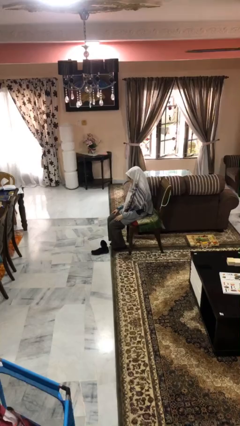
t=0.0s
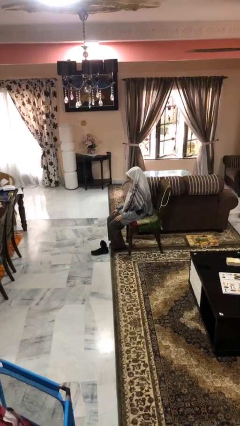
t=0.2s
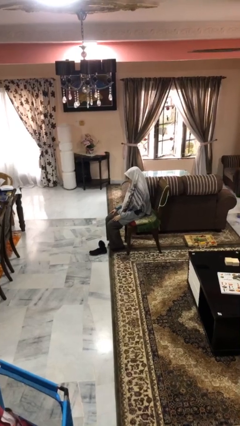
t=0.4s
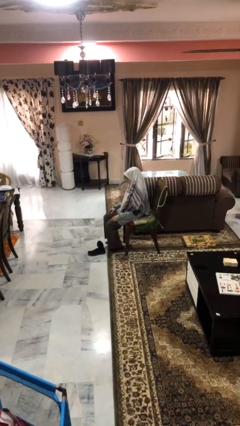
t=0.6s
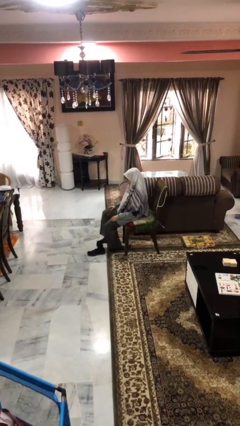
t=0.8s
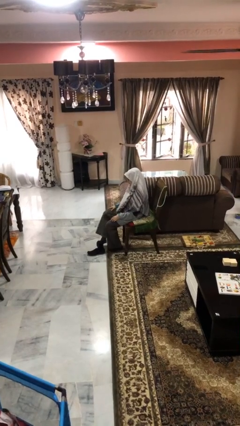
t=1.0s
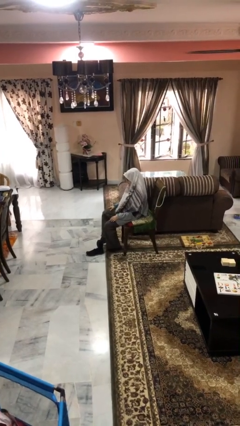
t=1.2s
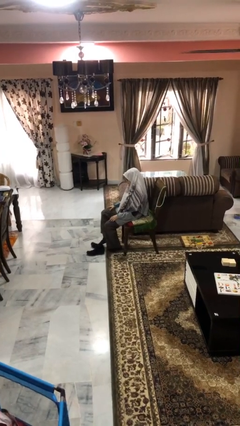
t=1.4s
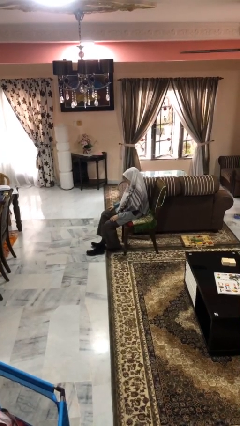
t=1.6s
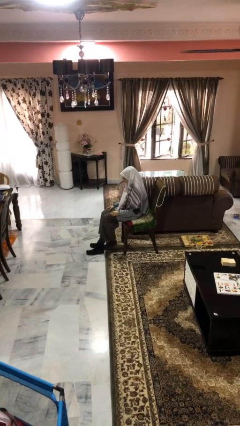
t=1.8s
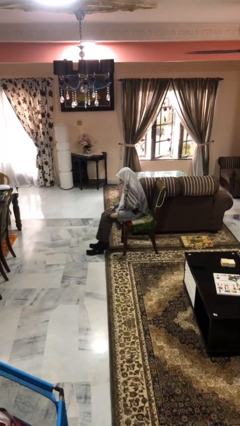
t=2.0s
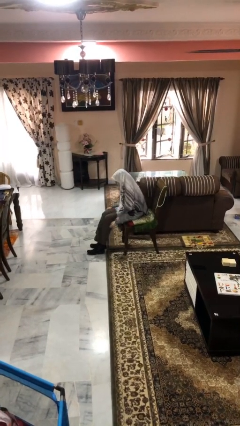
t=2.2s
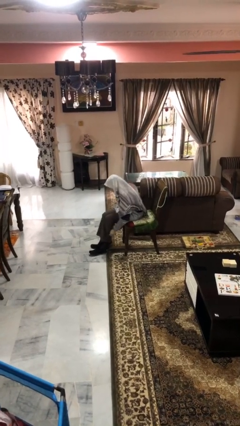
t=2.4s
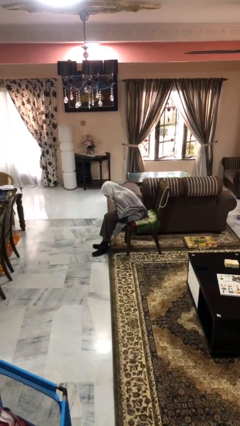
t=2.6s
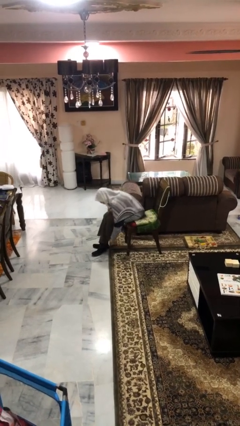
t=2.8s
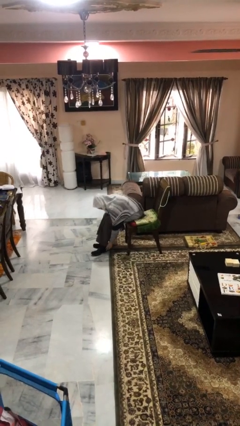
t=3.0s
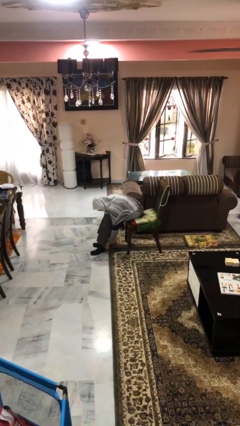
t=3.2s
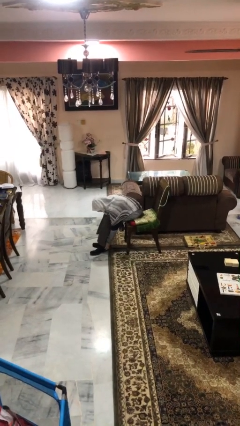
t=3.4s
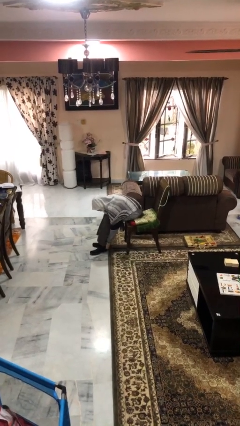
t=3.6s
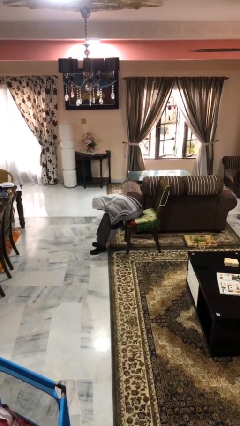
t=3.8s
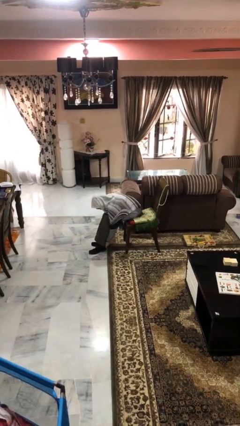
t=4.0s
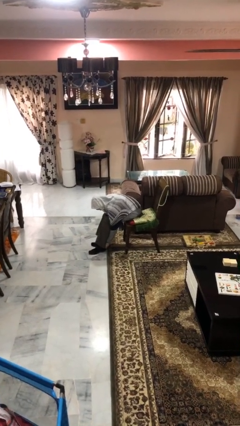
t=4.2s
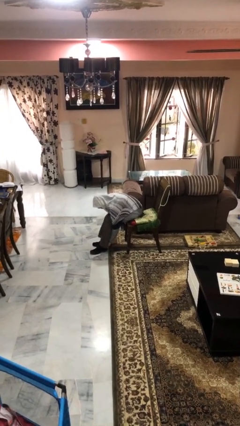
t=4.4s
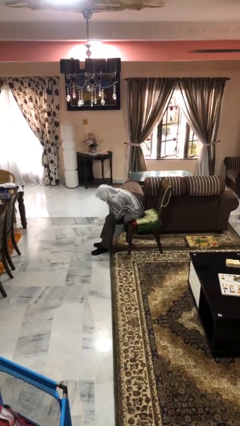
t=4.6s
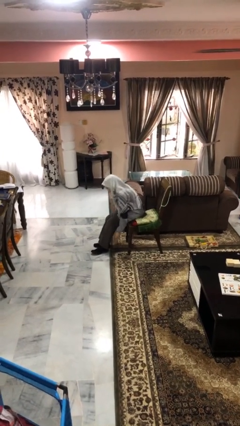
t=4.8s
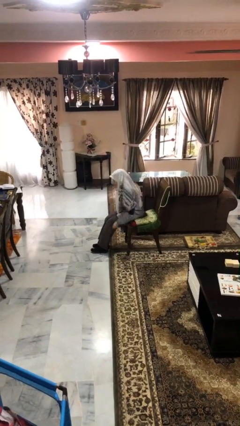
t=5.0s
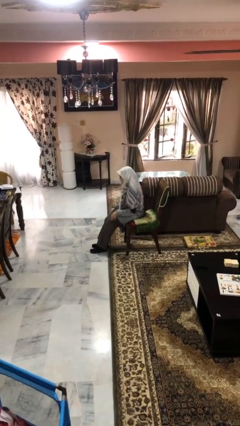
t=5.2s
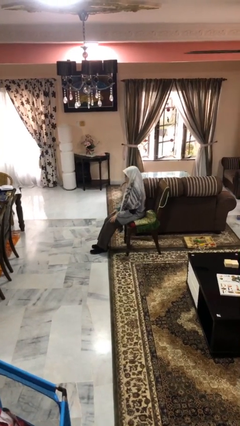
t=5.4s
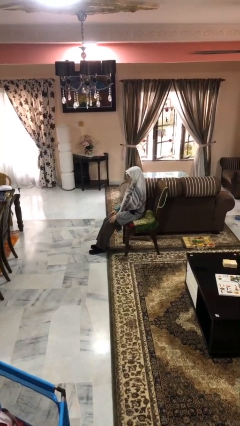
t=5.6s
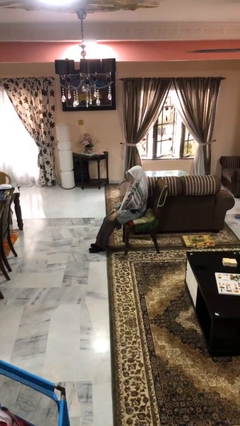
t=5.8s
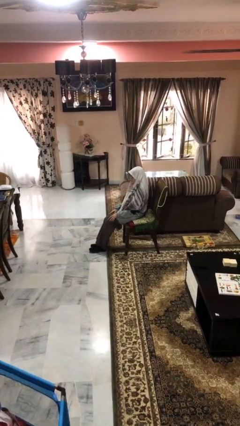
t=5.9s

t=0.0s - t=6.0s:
person puts on shoes

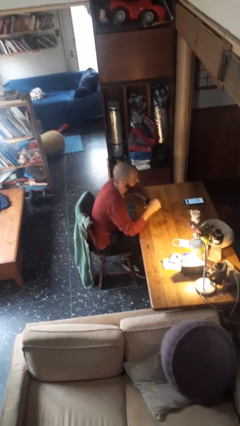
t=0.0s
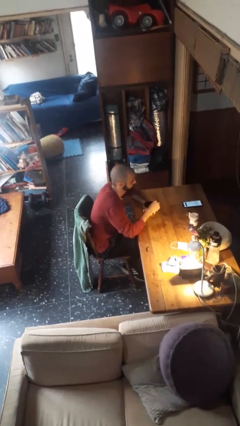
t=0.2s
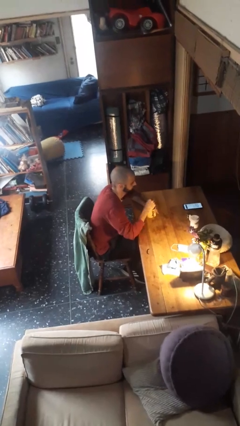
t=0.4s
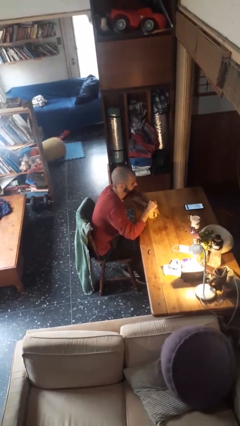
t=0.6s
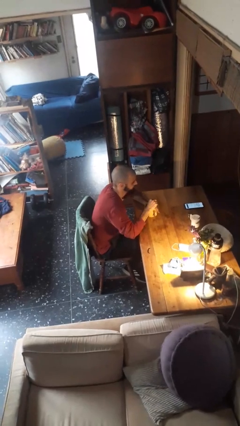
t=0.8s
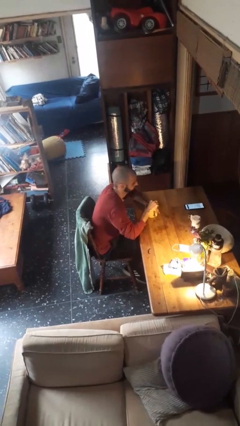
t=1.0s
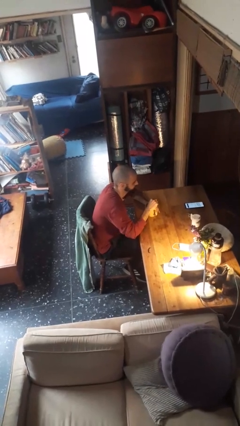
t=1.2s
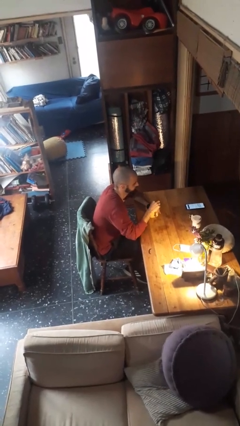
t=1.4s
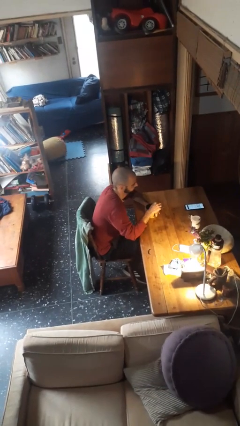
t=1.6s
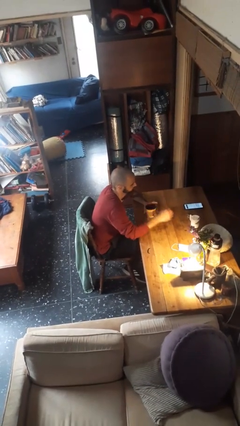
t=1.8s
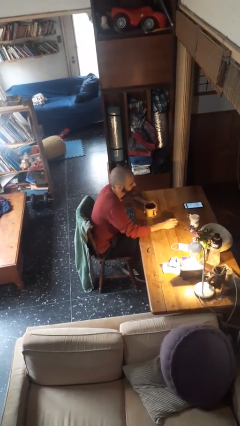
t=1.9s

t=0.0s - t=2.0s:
person stirs mug

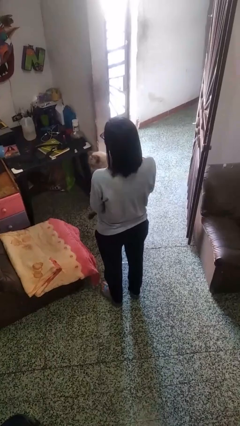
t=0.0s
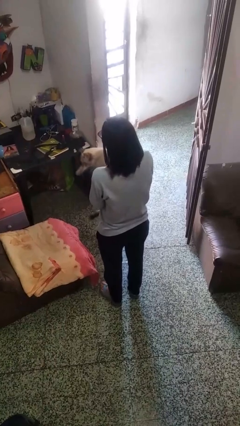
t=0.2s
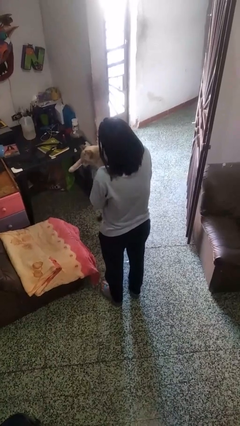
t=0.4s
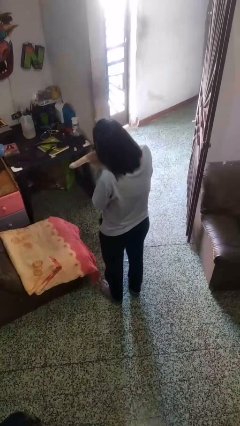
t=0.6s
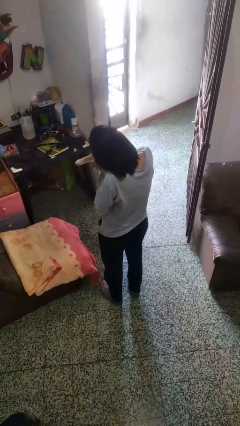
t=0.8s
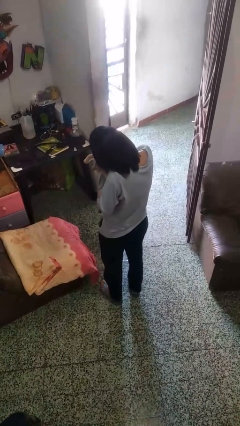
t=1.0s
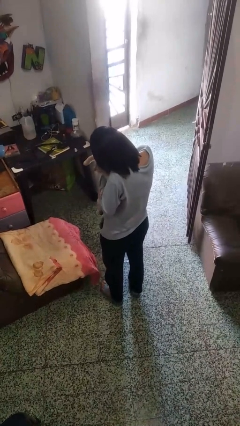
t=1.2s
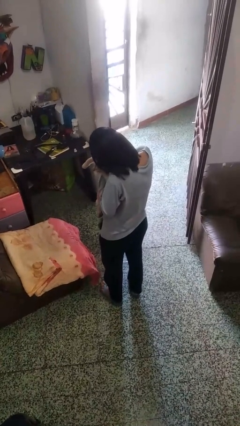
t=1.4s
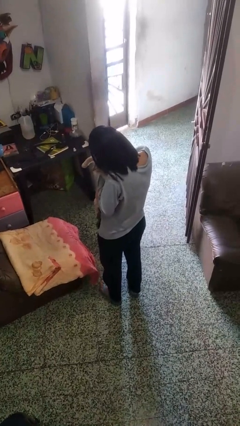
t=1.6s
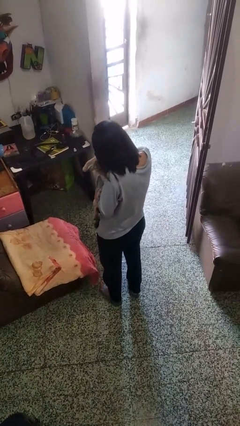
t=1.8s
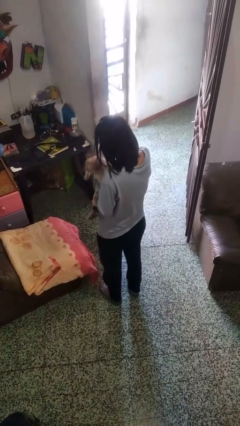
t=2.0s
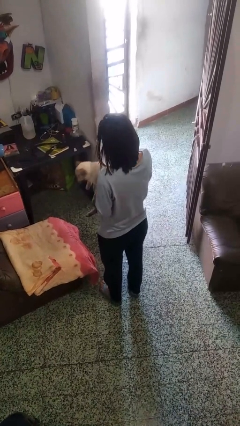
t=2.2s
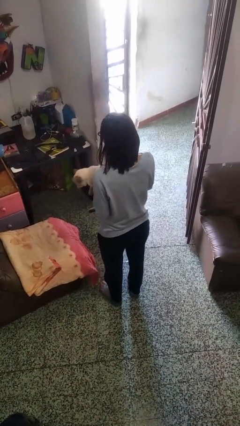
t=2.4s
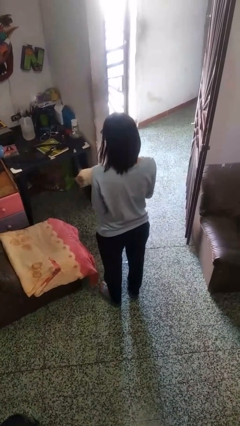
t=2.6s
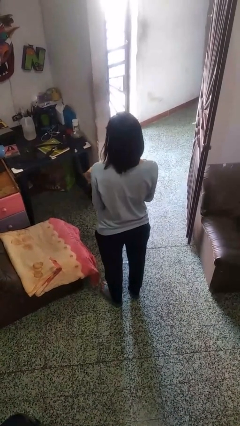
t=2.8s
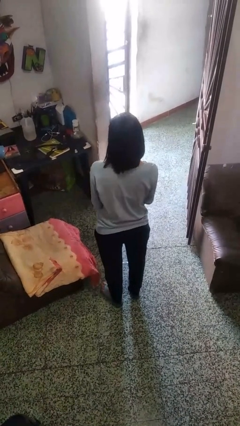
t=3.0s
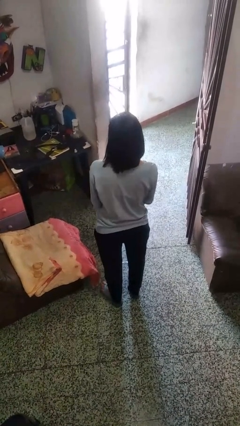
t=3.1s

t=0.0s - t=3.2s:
person hugs cat

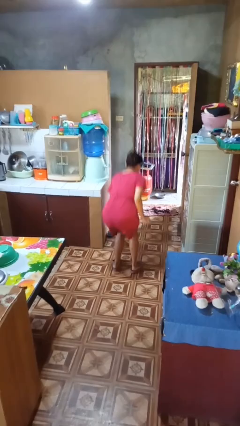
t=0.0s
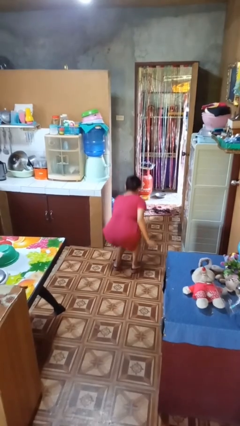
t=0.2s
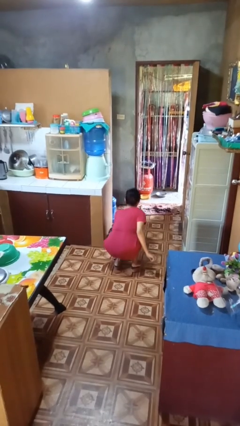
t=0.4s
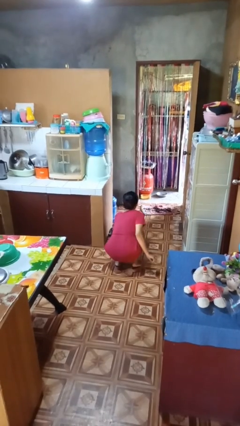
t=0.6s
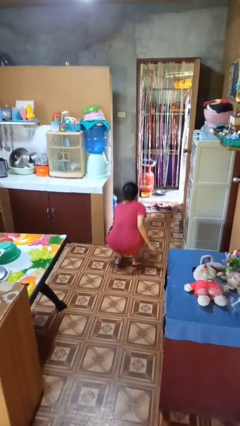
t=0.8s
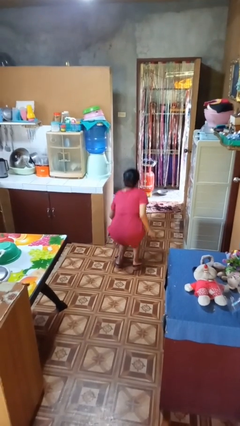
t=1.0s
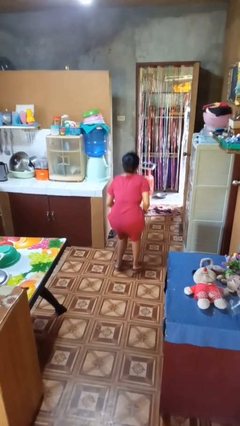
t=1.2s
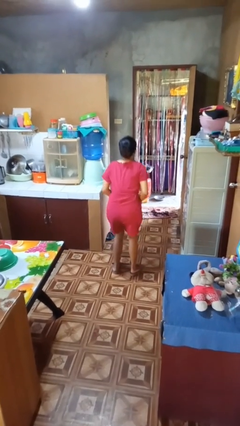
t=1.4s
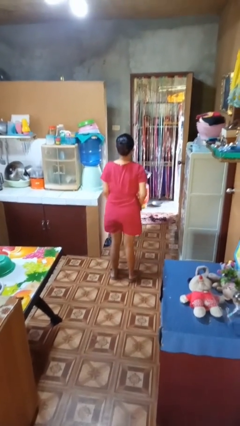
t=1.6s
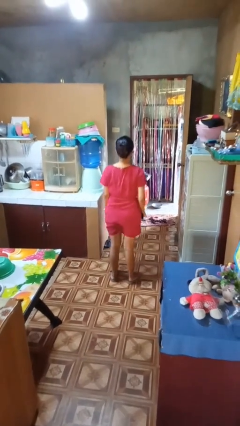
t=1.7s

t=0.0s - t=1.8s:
person picks up object from floor

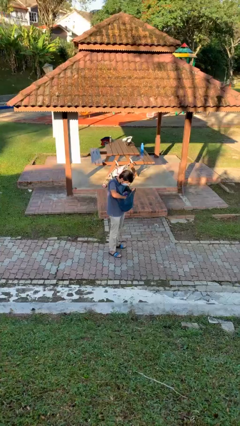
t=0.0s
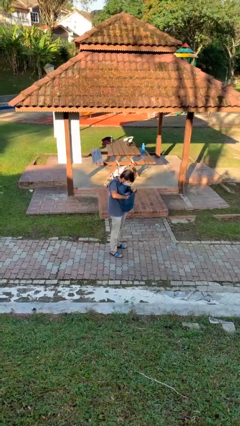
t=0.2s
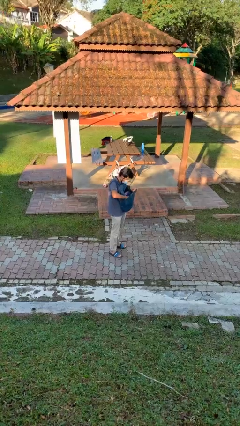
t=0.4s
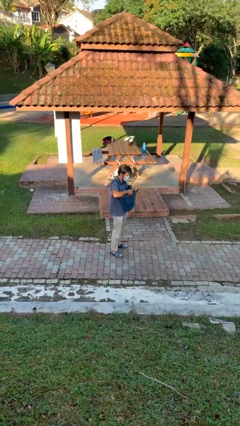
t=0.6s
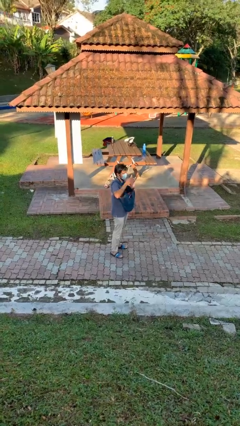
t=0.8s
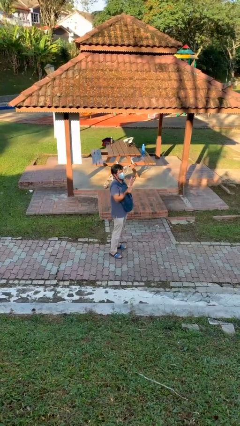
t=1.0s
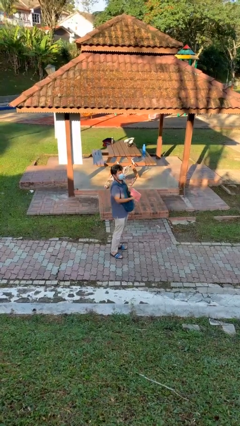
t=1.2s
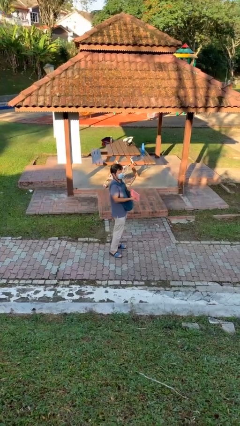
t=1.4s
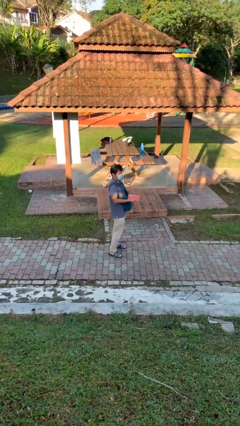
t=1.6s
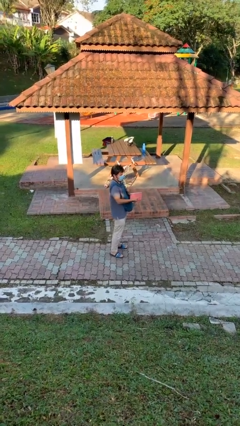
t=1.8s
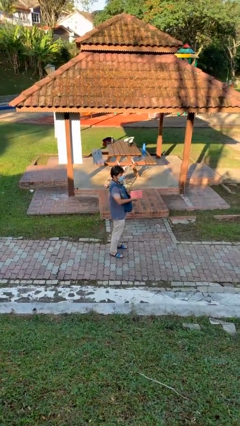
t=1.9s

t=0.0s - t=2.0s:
person takes object from backpack

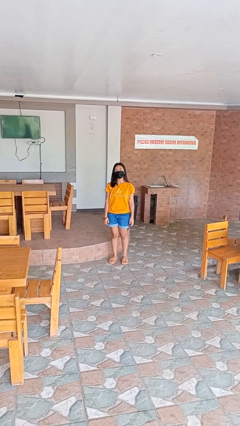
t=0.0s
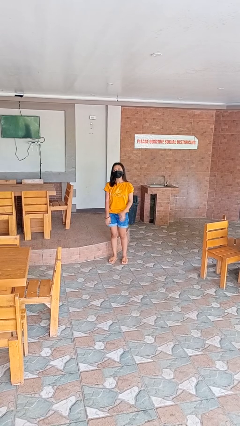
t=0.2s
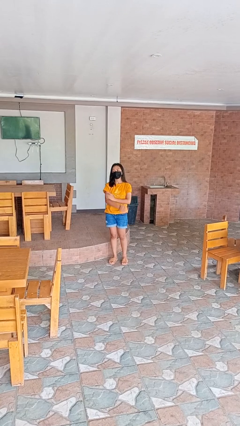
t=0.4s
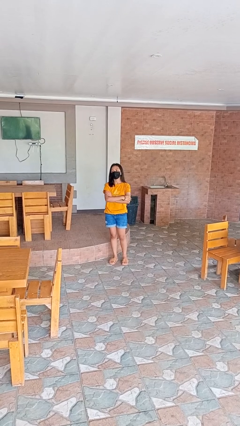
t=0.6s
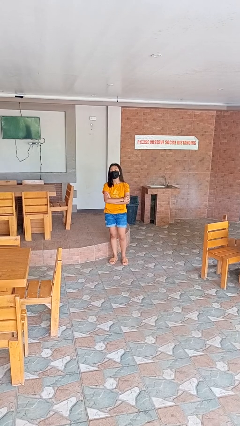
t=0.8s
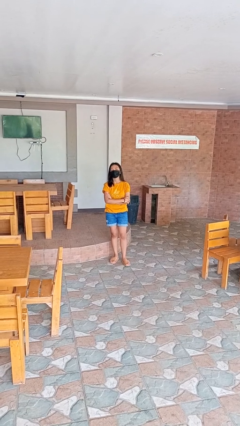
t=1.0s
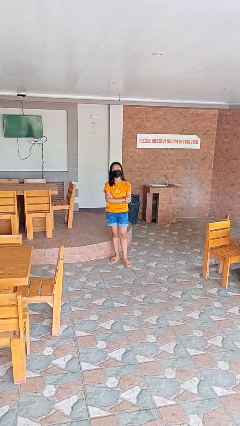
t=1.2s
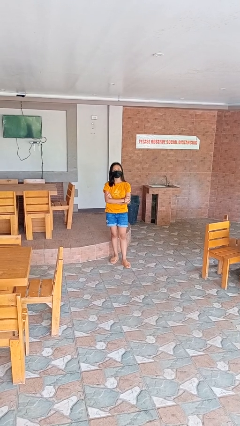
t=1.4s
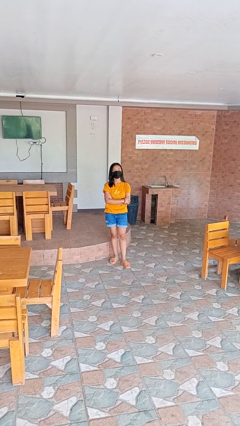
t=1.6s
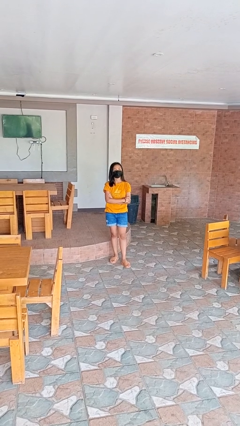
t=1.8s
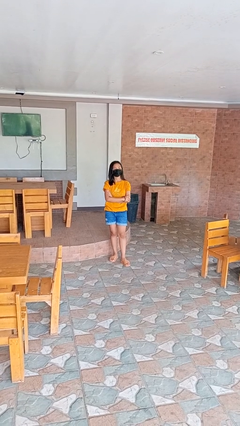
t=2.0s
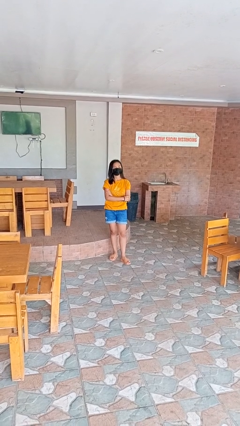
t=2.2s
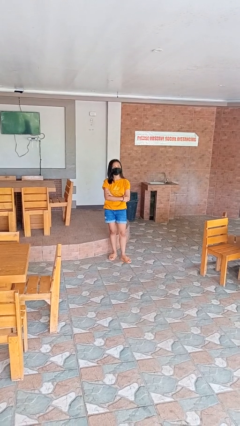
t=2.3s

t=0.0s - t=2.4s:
person crosses arms
